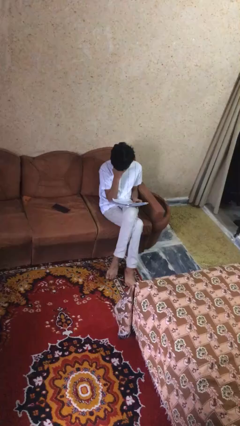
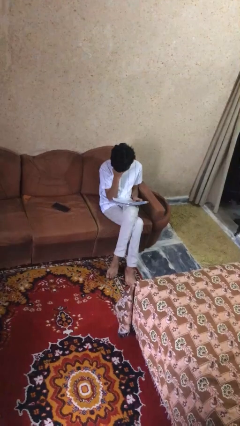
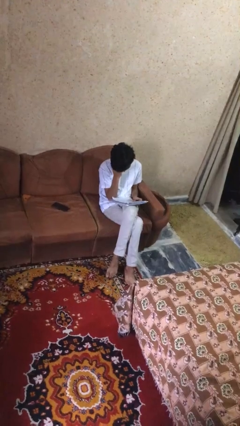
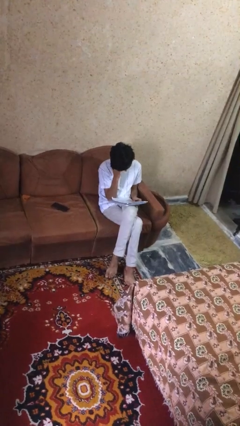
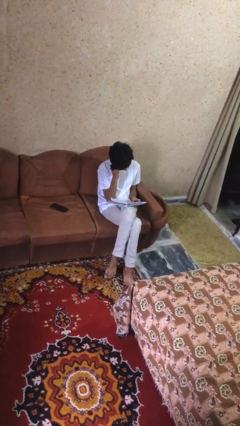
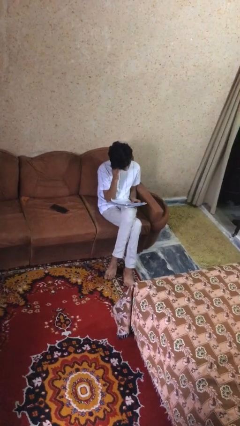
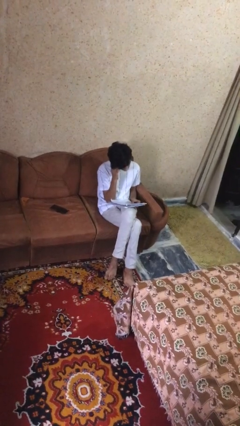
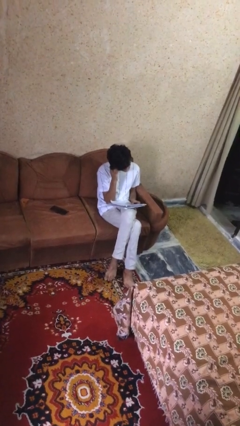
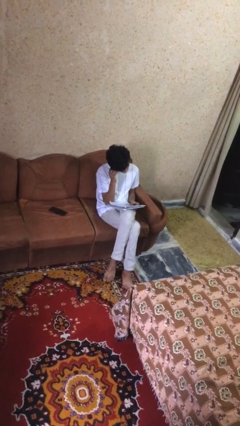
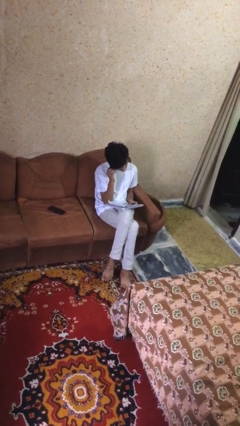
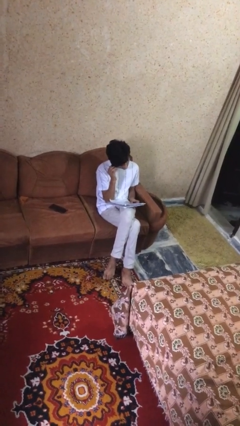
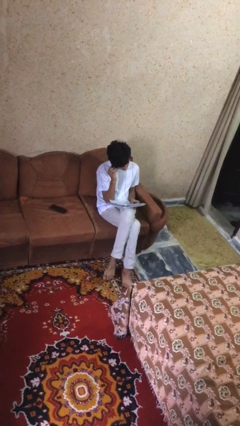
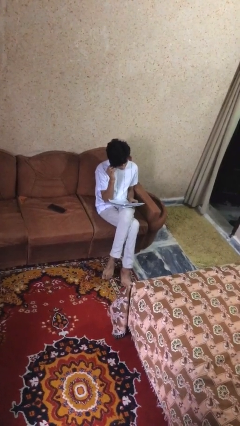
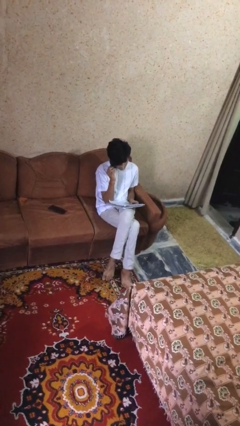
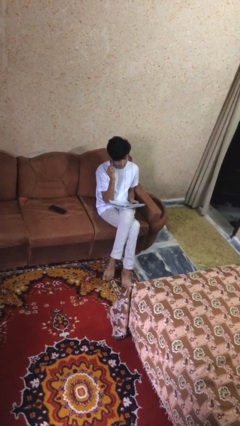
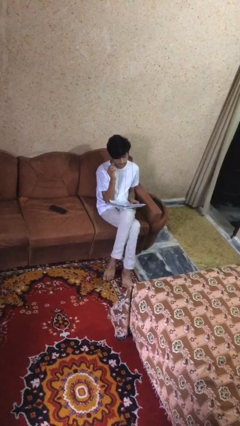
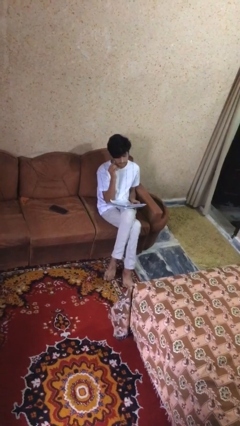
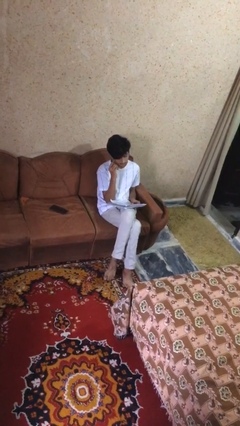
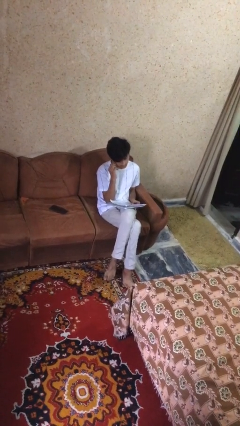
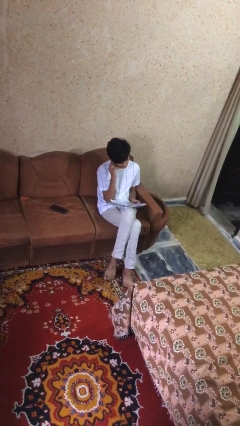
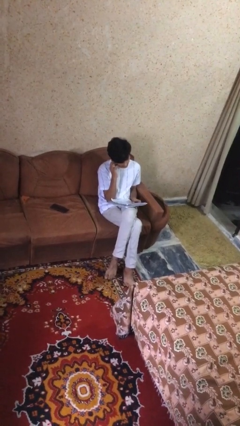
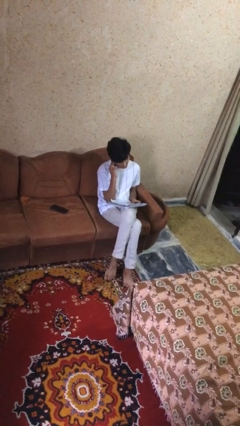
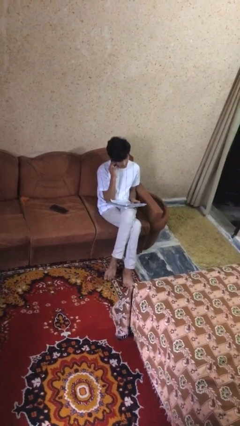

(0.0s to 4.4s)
person reads document

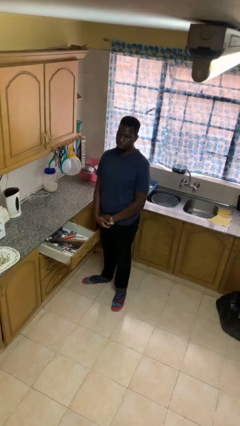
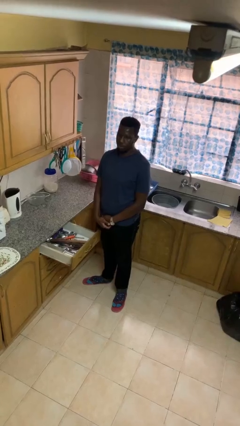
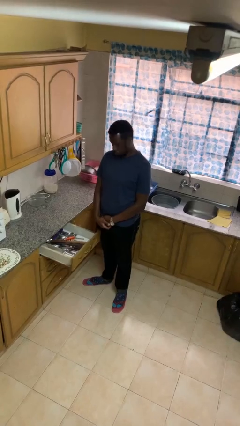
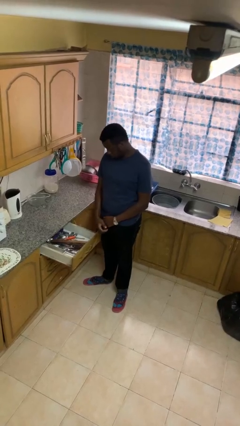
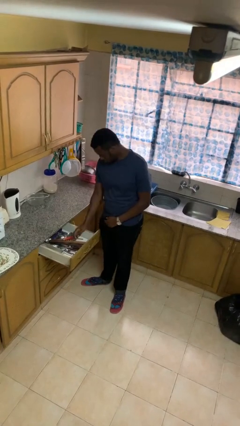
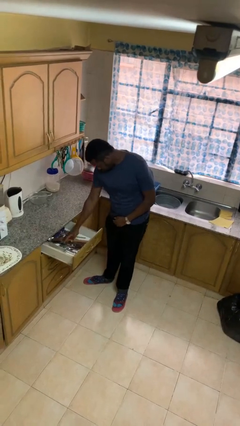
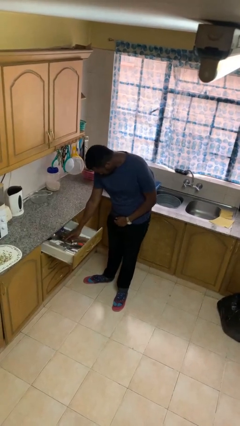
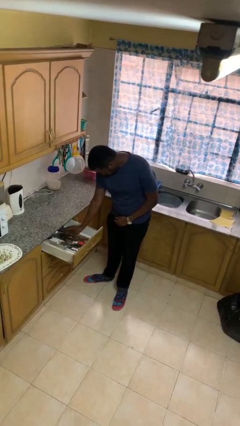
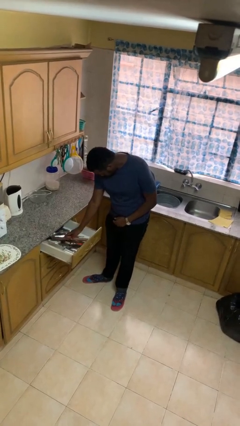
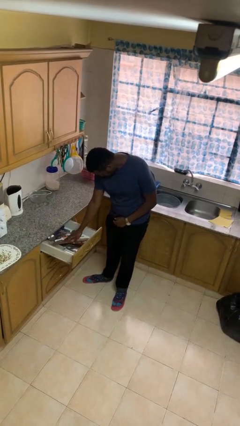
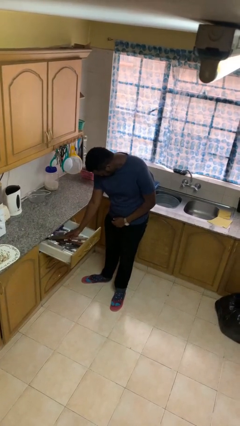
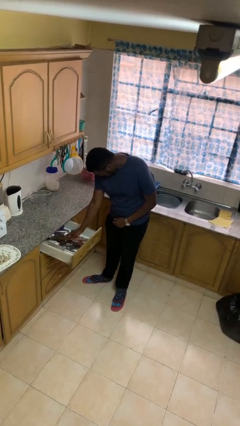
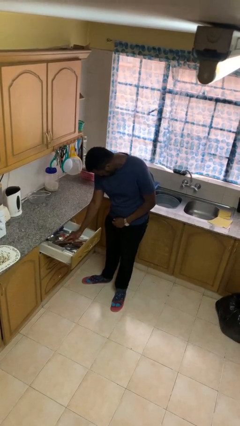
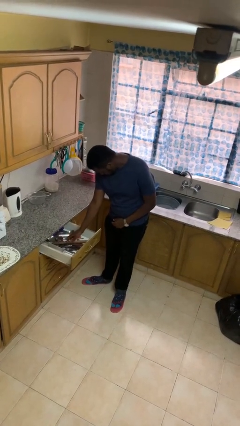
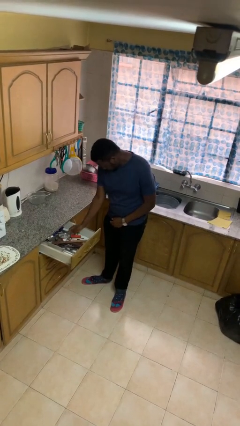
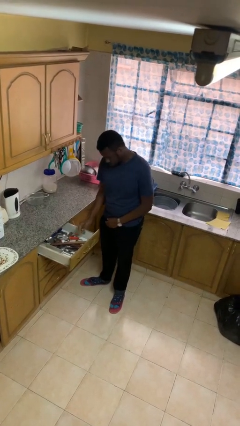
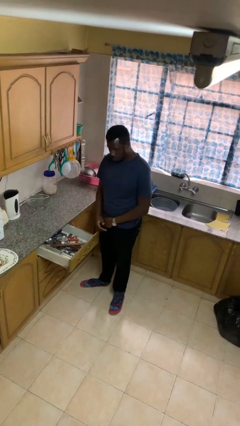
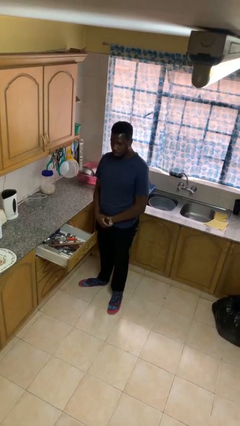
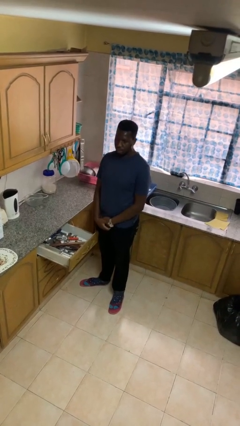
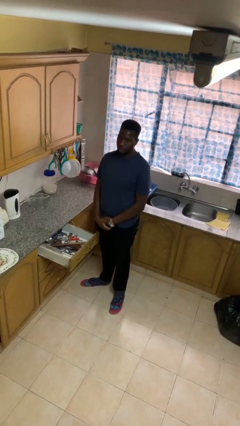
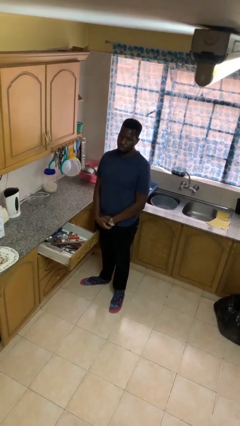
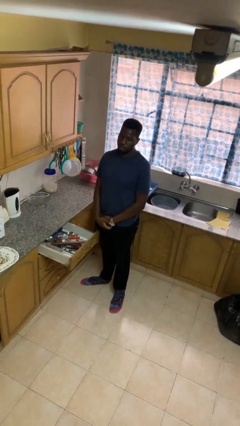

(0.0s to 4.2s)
person searches in kitchen drawer

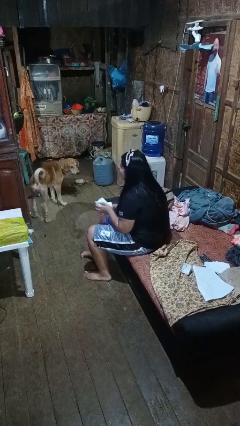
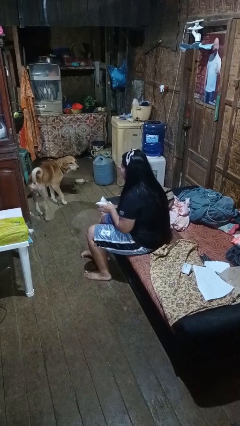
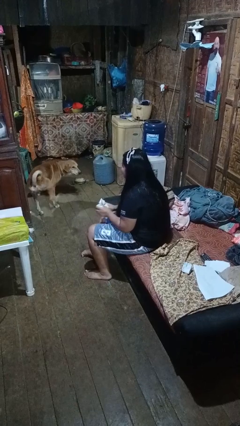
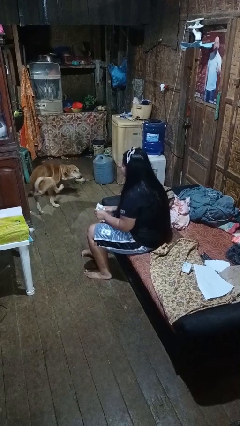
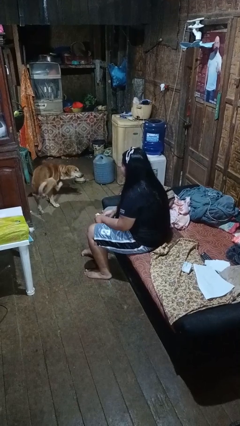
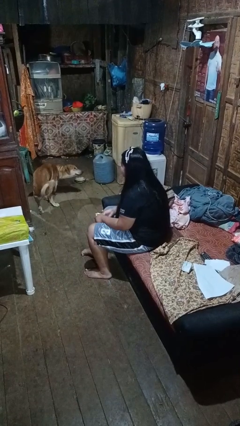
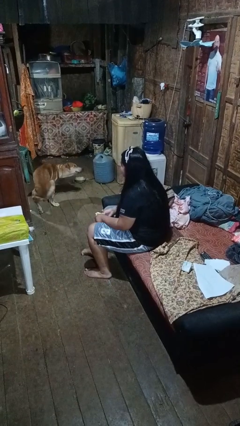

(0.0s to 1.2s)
person crumples paper

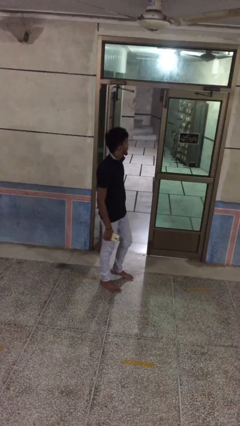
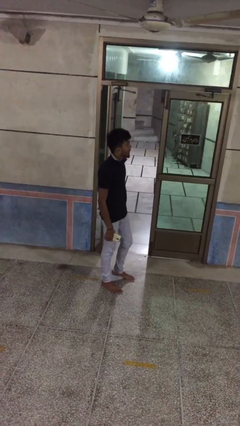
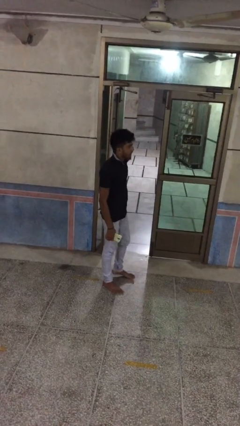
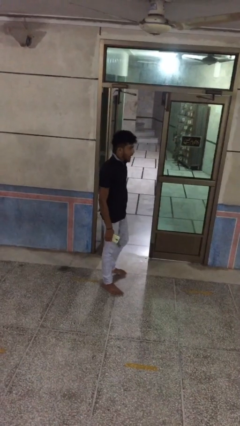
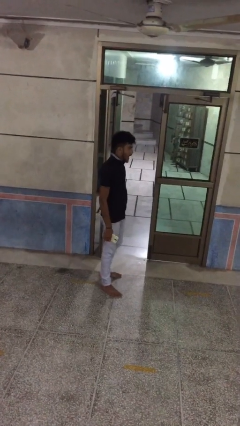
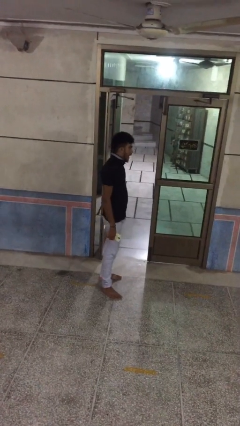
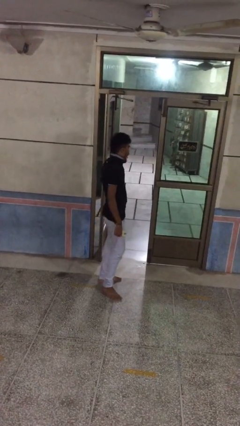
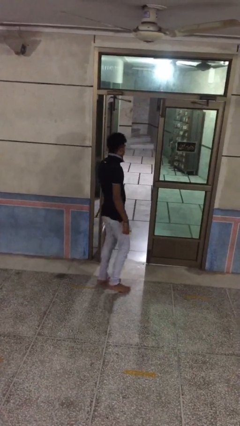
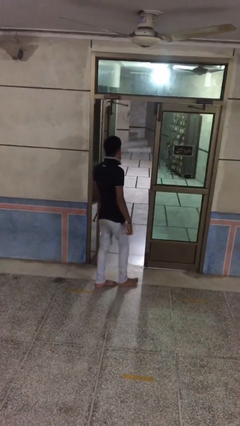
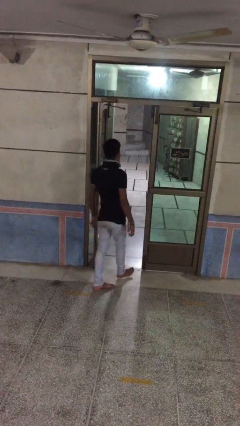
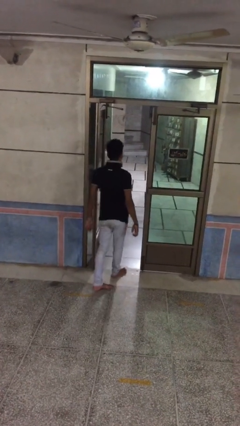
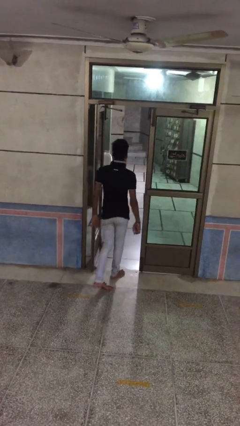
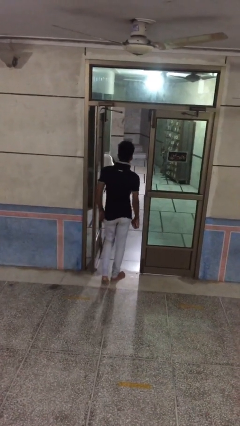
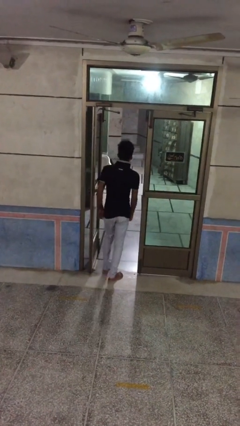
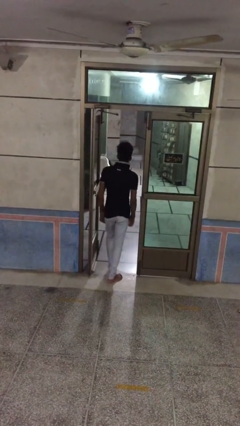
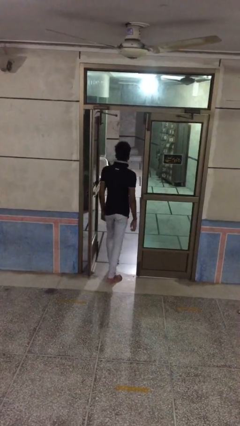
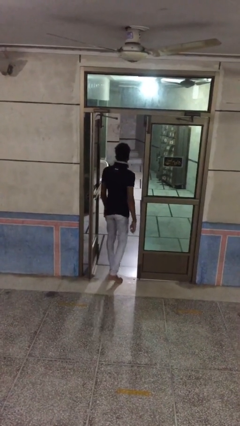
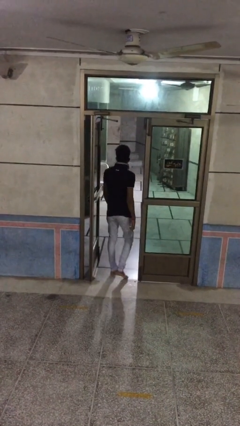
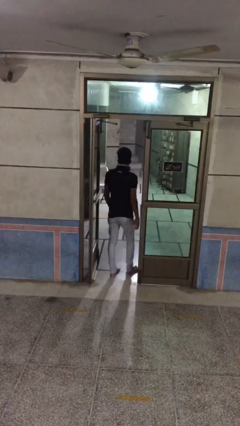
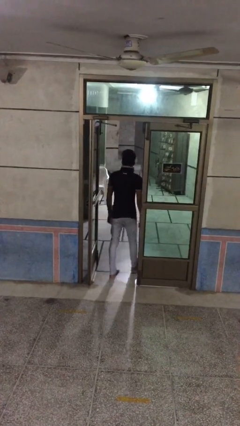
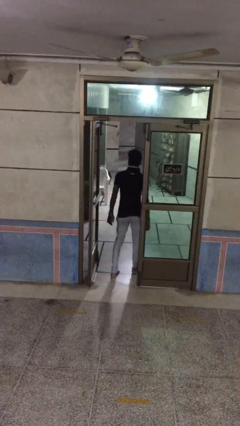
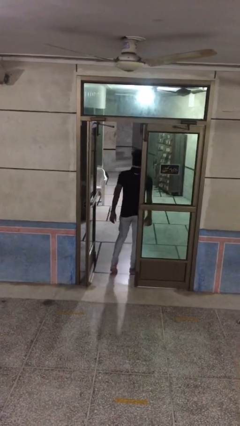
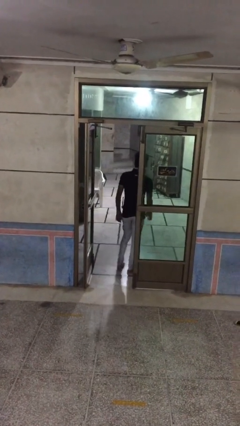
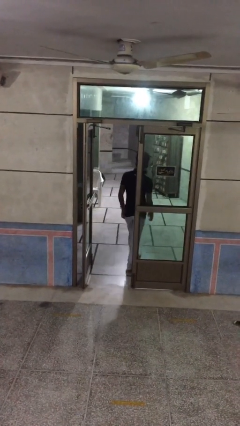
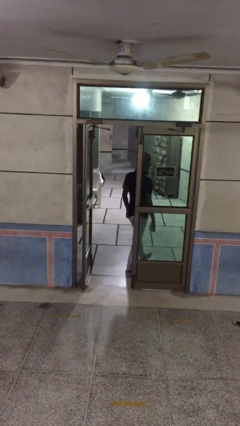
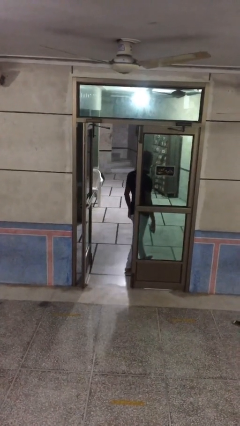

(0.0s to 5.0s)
person exits scene through structure

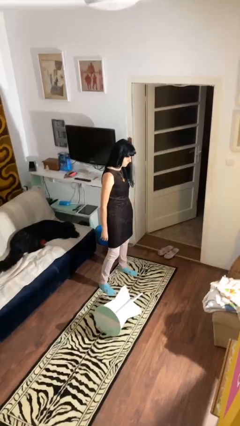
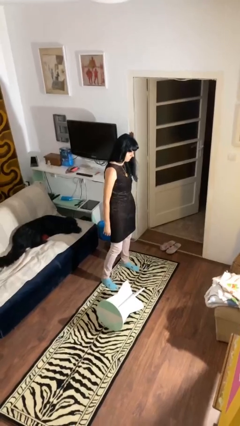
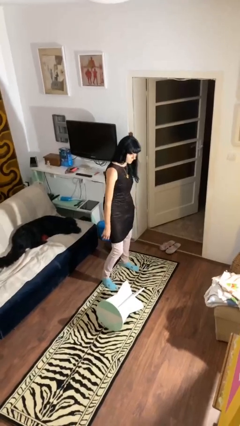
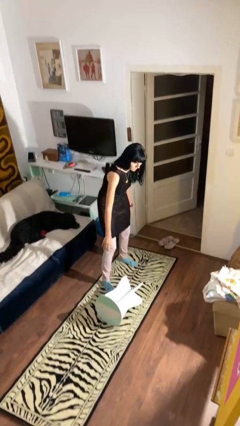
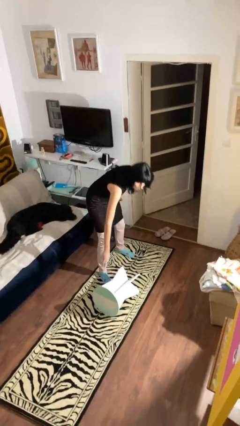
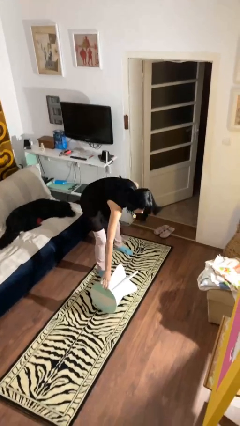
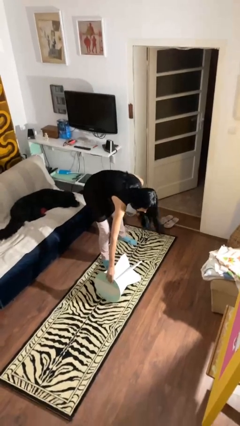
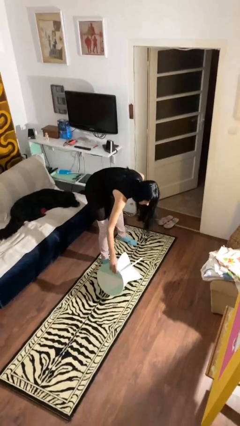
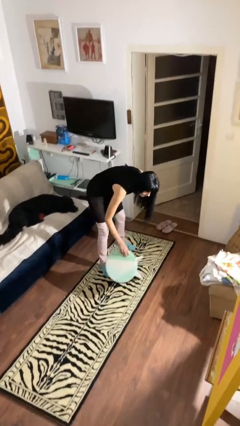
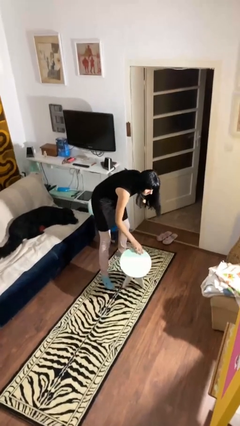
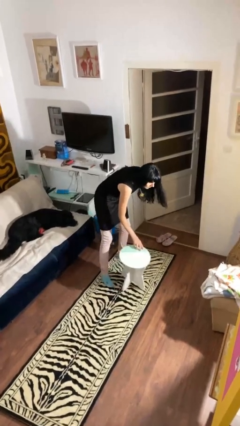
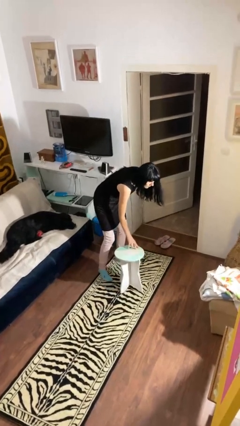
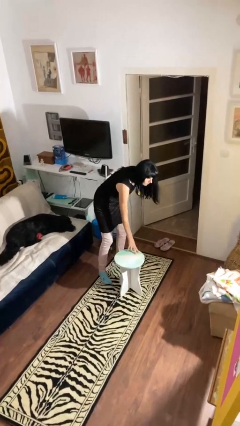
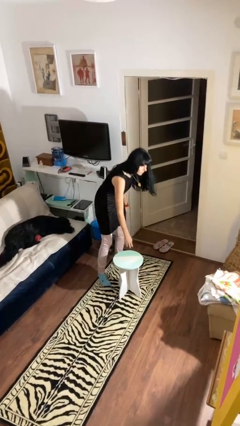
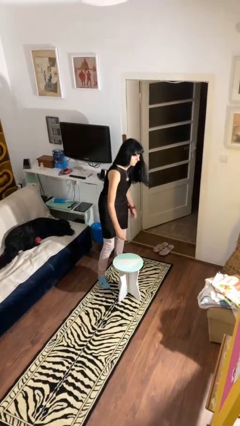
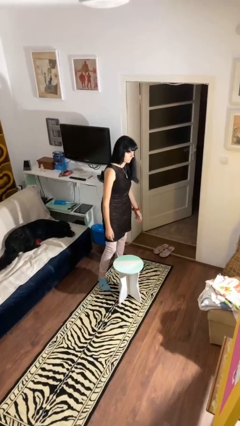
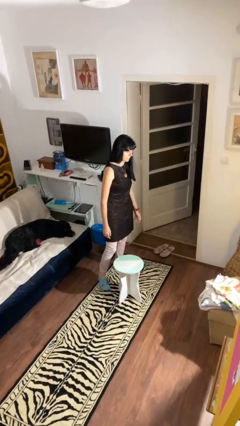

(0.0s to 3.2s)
person sets upright furniture
